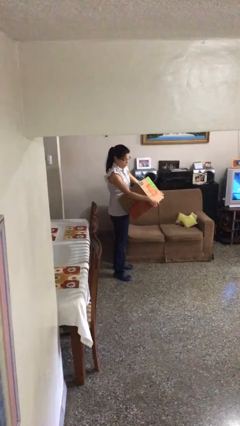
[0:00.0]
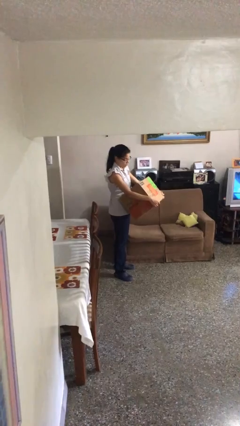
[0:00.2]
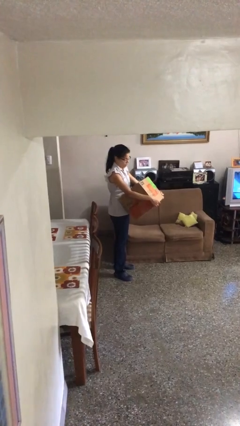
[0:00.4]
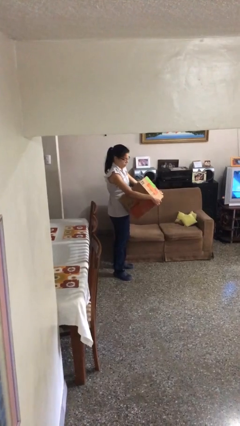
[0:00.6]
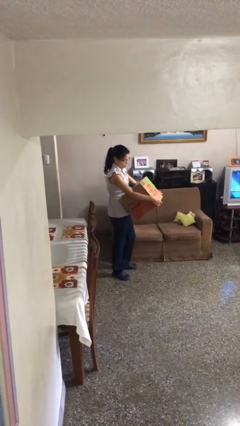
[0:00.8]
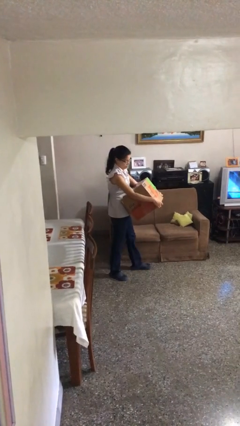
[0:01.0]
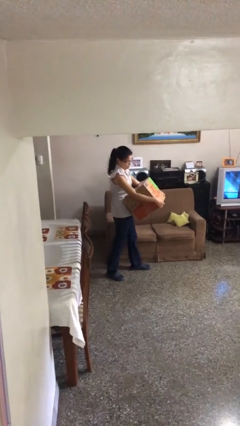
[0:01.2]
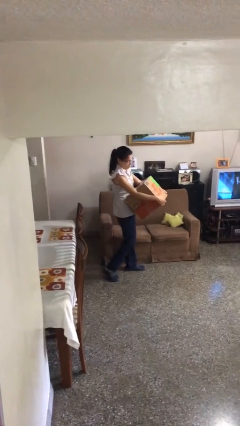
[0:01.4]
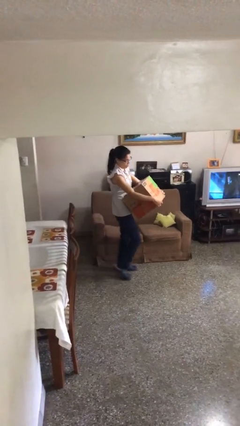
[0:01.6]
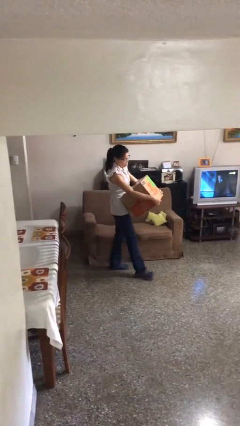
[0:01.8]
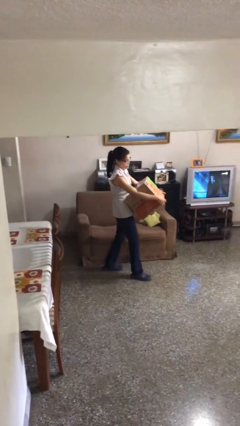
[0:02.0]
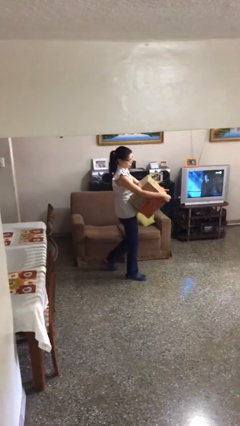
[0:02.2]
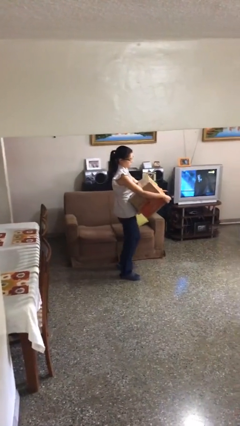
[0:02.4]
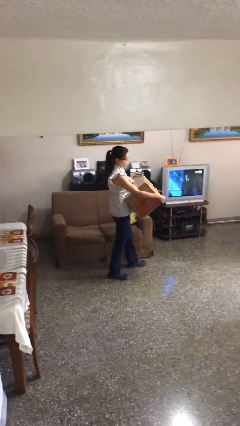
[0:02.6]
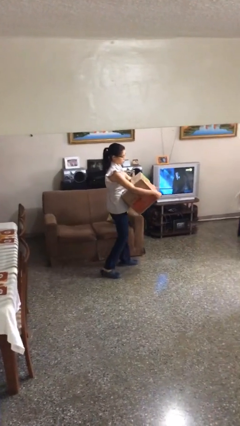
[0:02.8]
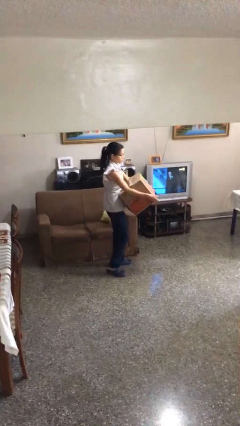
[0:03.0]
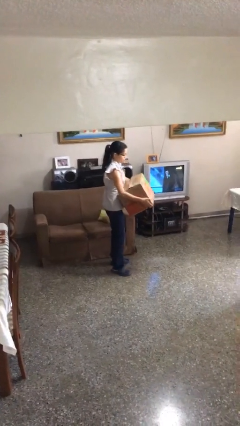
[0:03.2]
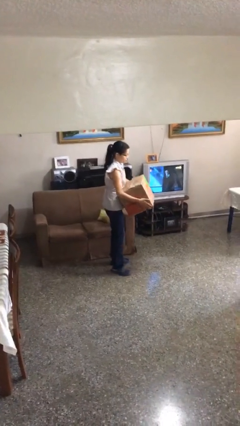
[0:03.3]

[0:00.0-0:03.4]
person carries heavy object

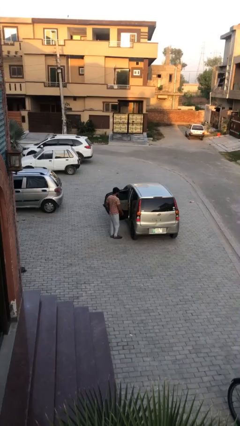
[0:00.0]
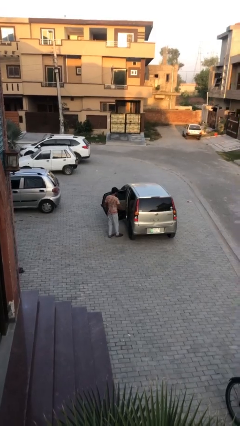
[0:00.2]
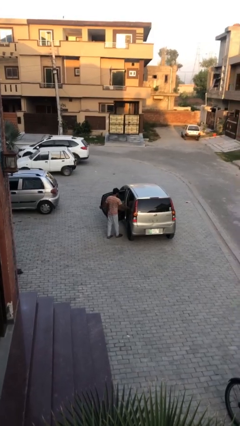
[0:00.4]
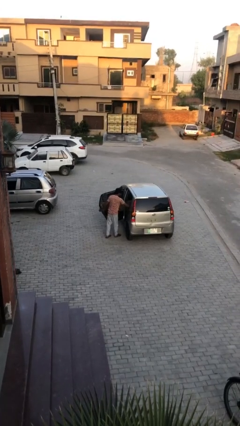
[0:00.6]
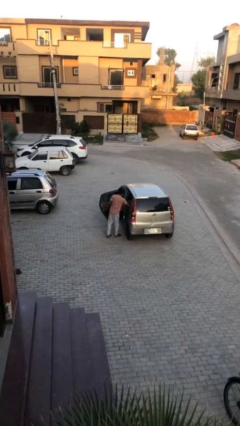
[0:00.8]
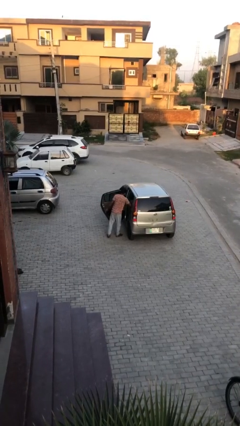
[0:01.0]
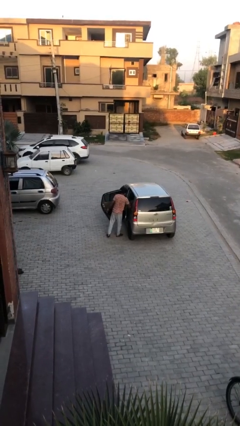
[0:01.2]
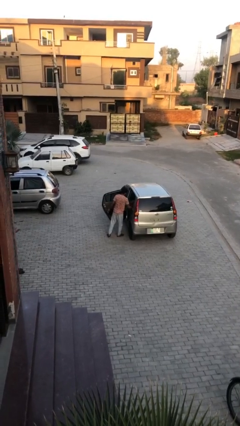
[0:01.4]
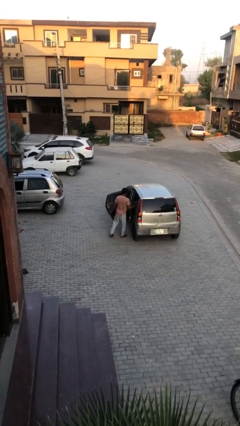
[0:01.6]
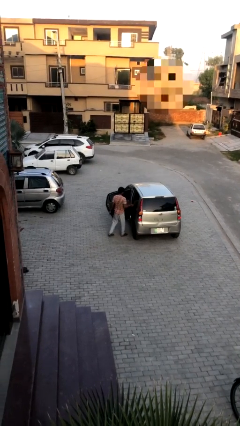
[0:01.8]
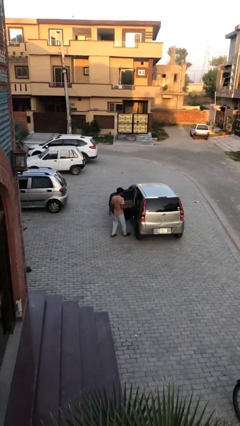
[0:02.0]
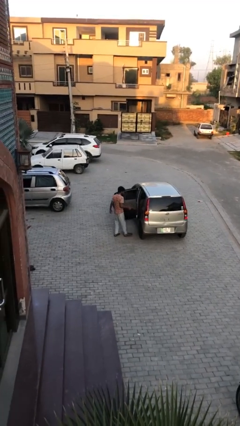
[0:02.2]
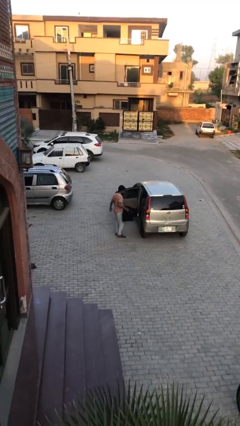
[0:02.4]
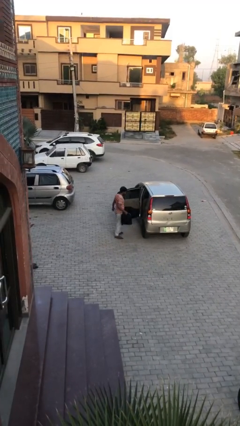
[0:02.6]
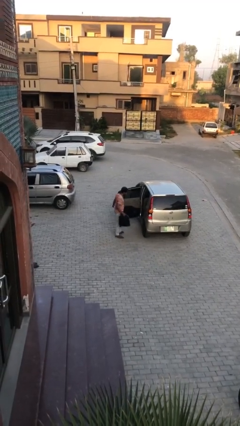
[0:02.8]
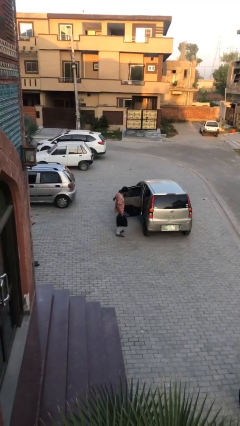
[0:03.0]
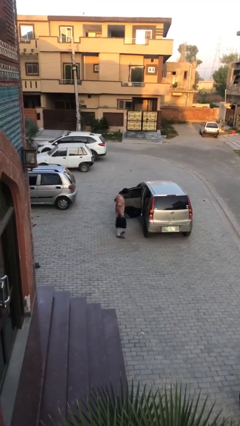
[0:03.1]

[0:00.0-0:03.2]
person unloads car

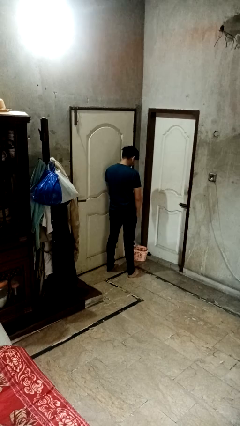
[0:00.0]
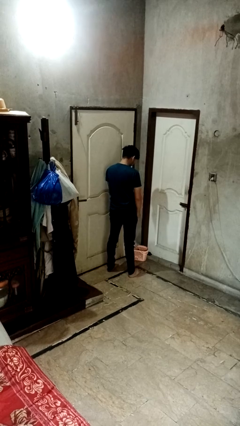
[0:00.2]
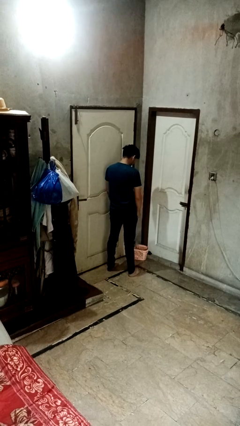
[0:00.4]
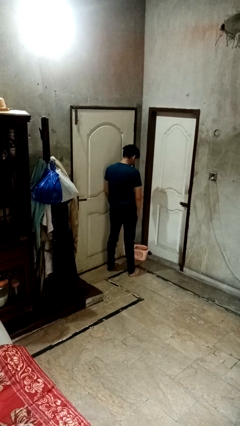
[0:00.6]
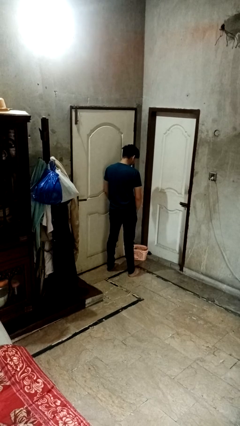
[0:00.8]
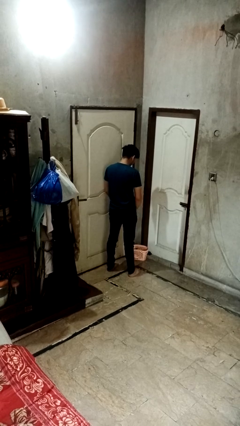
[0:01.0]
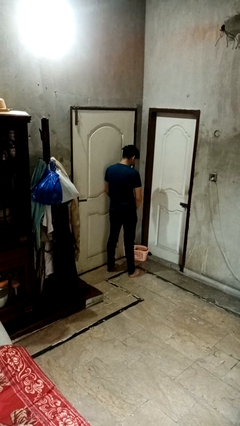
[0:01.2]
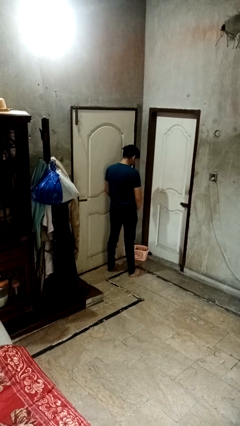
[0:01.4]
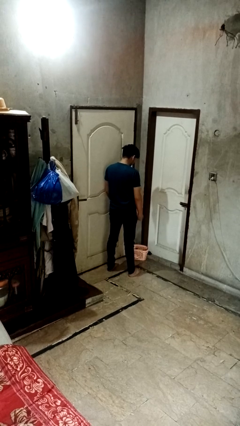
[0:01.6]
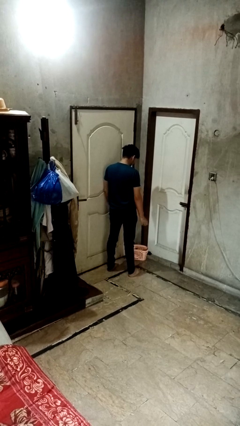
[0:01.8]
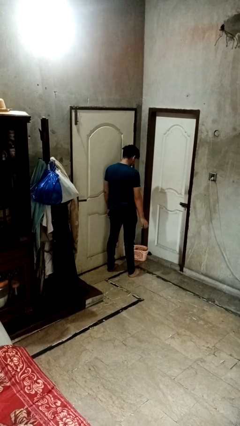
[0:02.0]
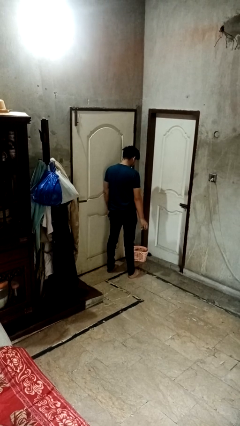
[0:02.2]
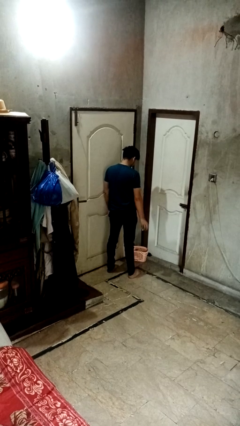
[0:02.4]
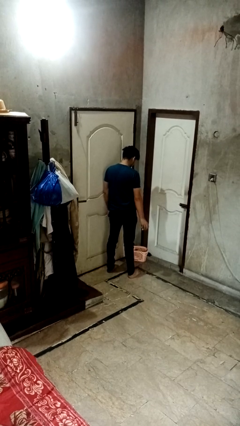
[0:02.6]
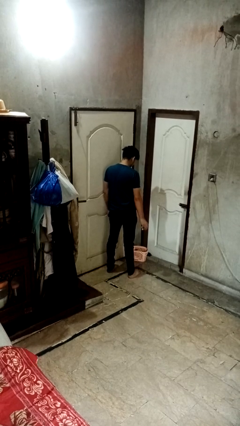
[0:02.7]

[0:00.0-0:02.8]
person discards trash

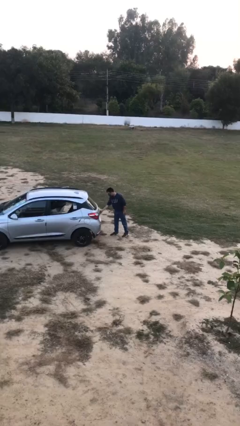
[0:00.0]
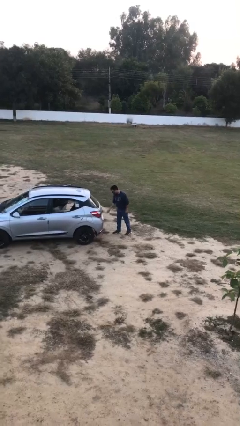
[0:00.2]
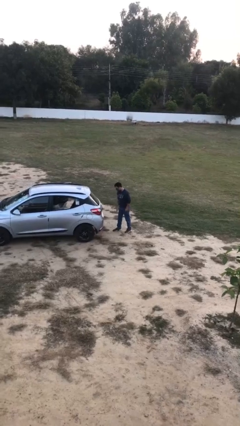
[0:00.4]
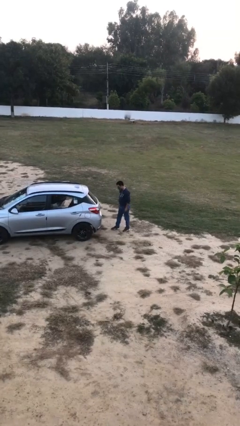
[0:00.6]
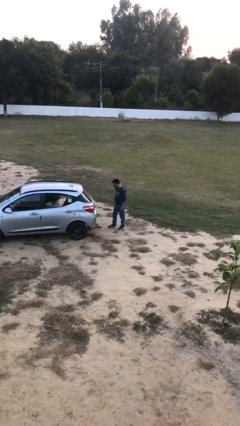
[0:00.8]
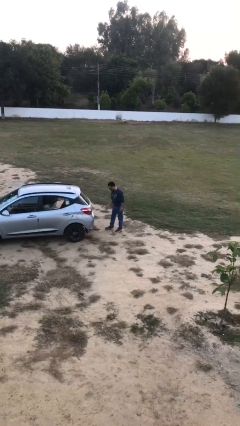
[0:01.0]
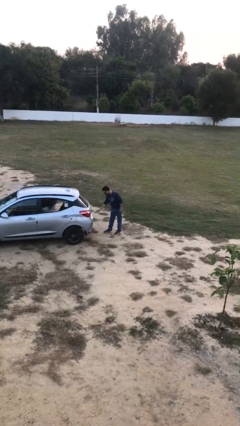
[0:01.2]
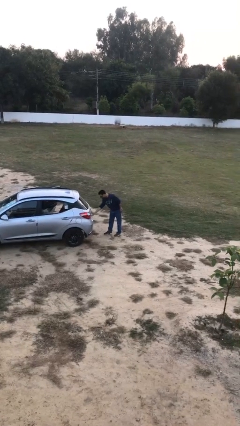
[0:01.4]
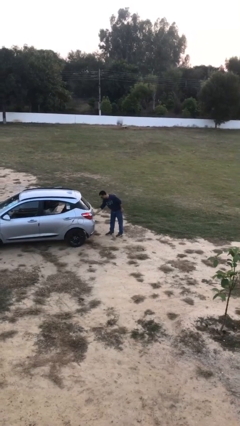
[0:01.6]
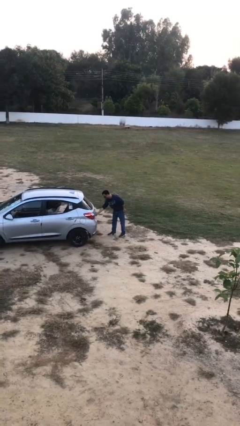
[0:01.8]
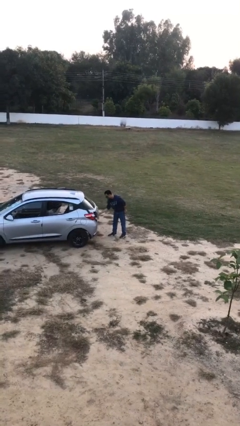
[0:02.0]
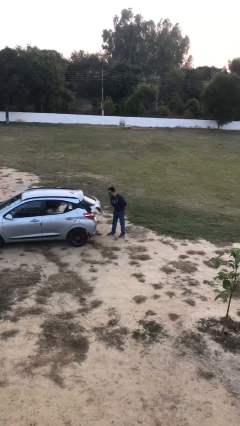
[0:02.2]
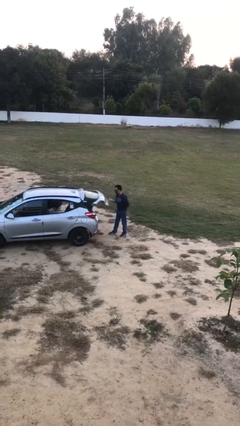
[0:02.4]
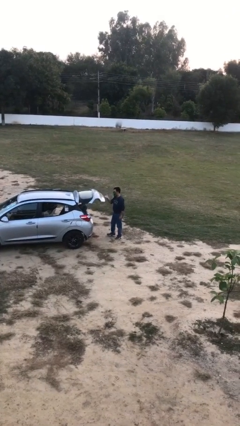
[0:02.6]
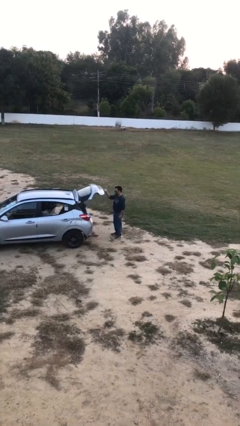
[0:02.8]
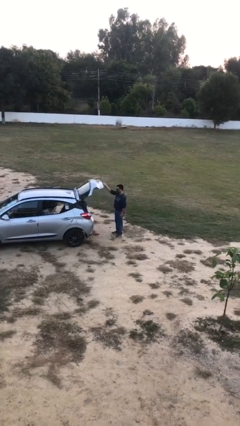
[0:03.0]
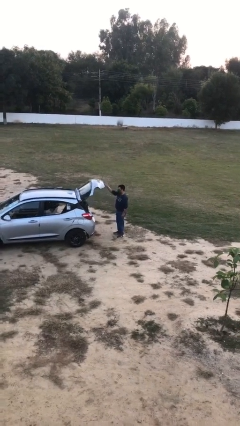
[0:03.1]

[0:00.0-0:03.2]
person opens car trunk

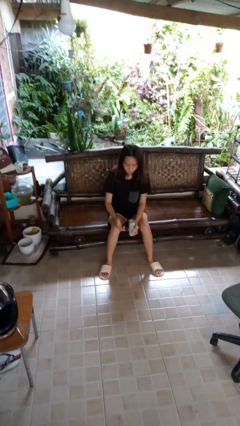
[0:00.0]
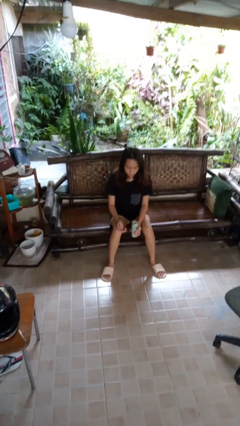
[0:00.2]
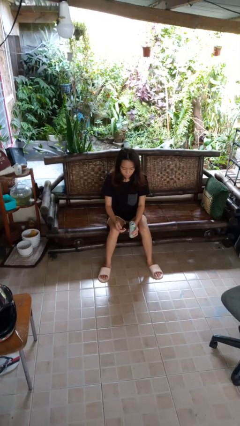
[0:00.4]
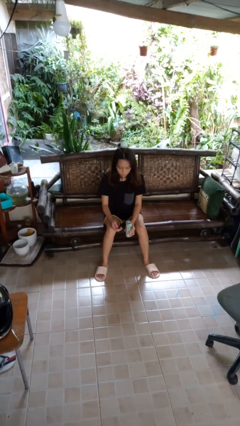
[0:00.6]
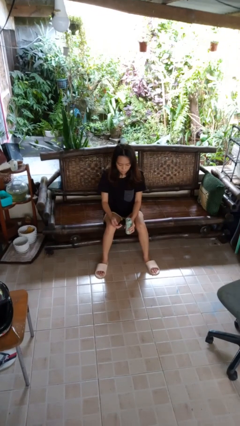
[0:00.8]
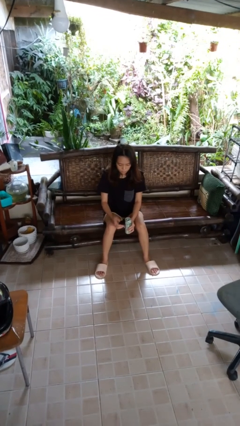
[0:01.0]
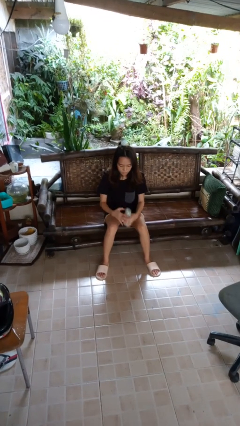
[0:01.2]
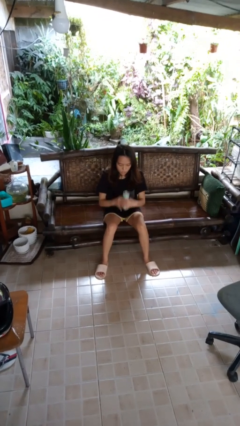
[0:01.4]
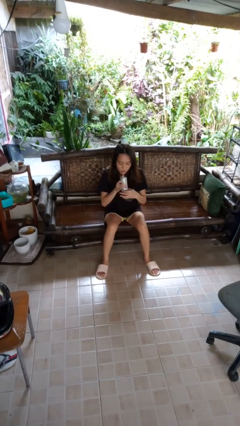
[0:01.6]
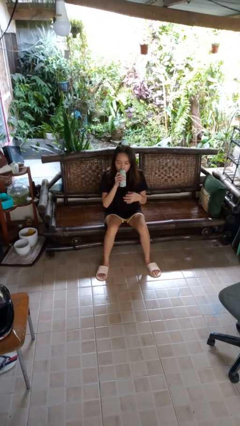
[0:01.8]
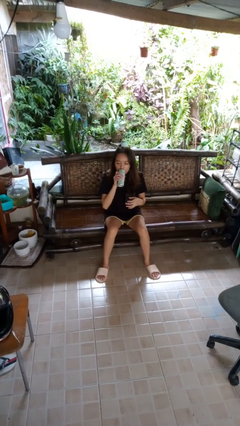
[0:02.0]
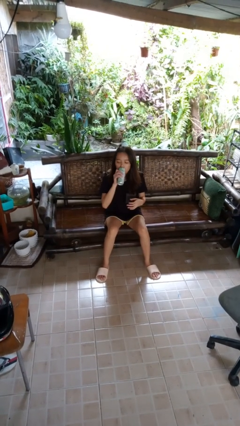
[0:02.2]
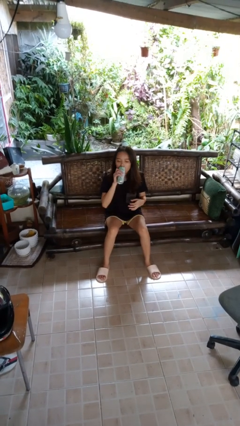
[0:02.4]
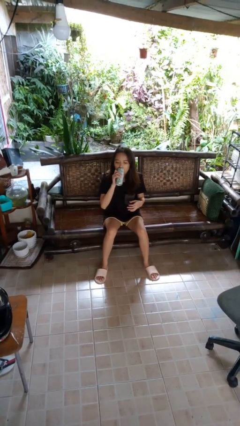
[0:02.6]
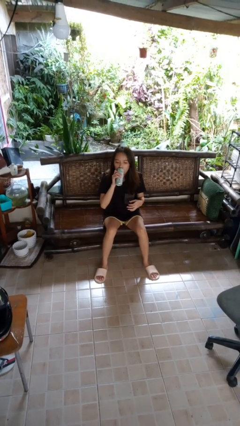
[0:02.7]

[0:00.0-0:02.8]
person drinks from beverage can

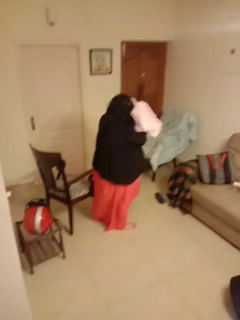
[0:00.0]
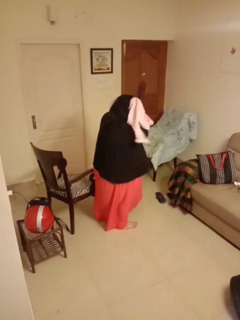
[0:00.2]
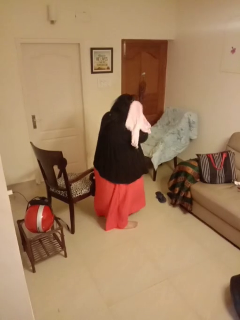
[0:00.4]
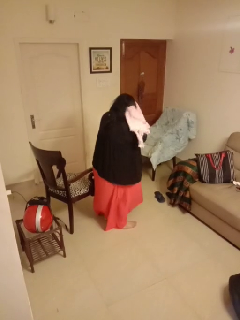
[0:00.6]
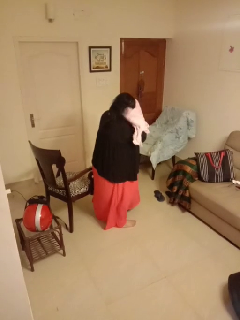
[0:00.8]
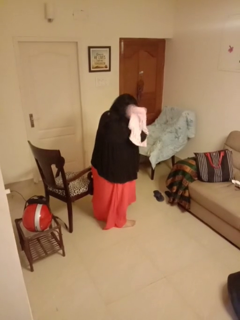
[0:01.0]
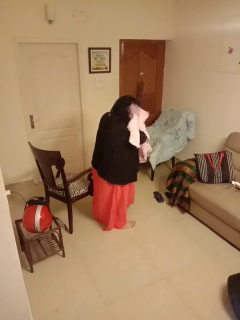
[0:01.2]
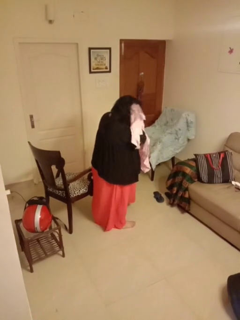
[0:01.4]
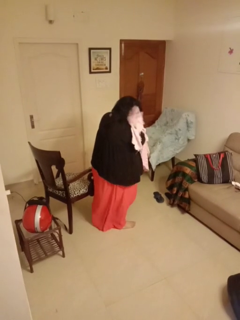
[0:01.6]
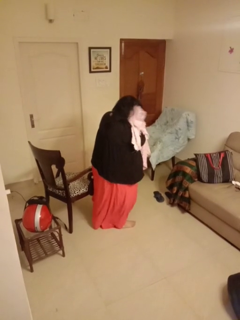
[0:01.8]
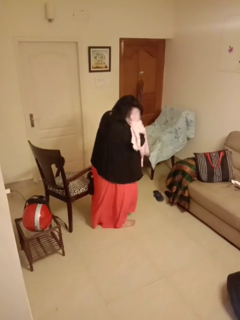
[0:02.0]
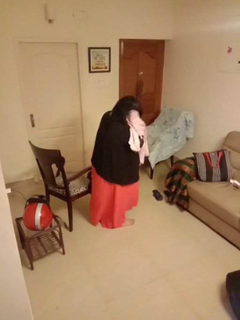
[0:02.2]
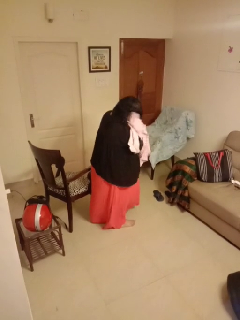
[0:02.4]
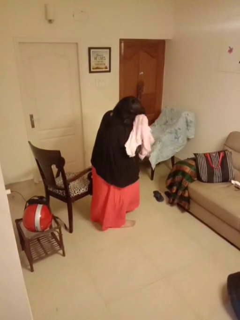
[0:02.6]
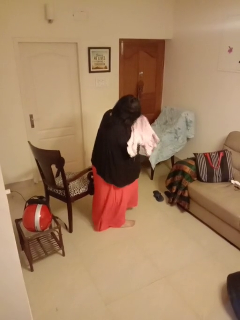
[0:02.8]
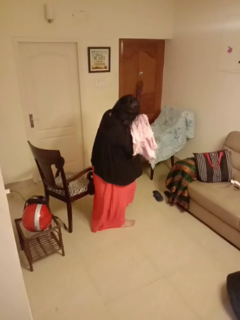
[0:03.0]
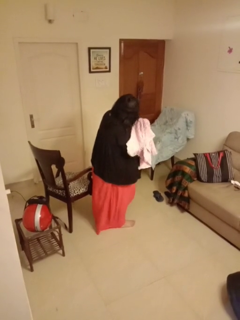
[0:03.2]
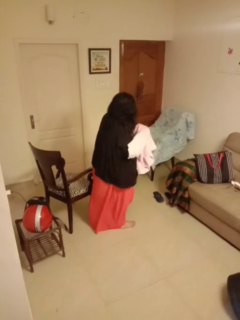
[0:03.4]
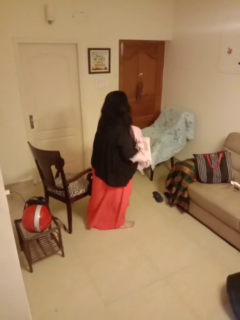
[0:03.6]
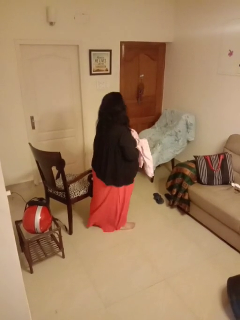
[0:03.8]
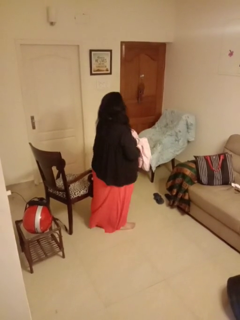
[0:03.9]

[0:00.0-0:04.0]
person dries hair with towel
